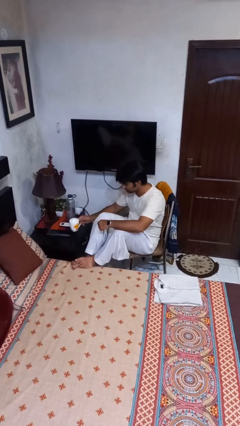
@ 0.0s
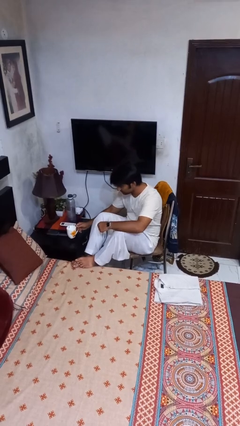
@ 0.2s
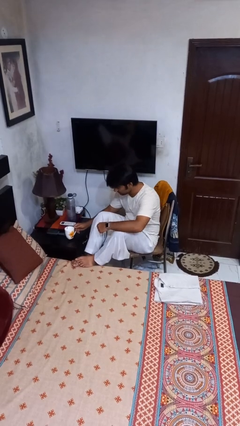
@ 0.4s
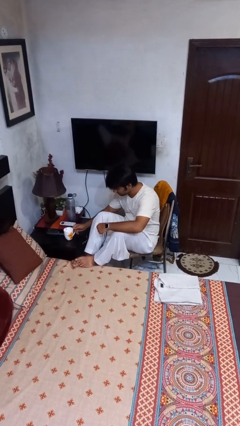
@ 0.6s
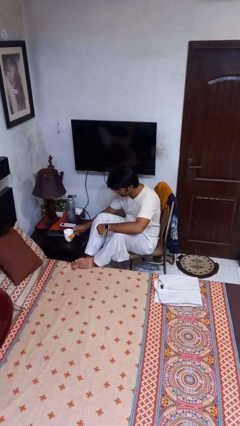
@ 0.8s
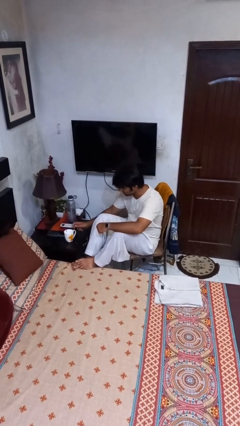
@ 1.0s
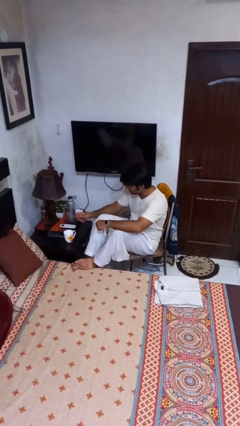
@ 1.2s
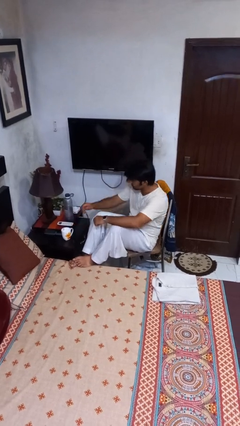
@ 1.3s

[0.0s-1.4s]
person puts down object on table

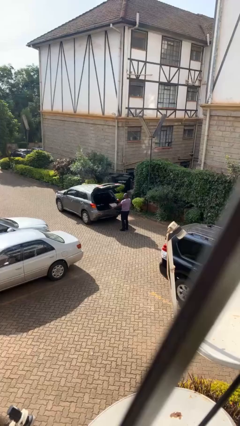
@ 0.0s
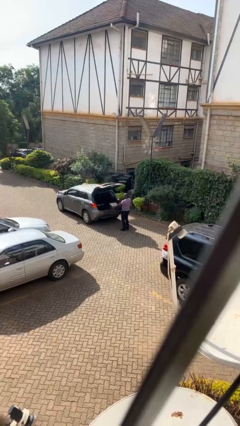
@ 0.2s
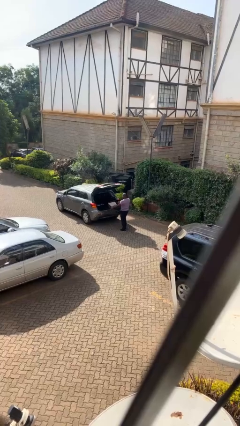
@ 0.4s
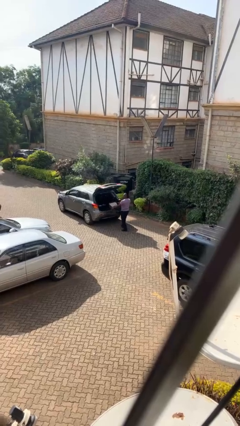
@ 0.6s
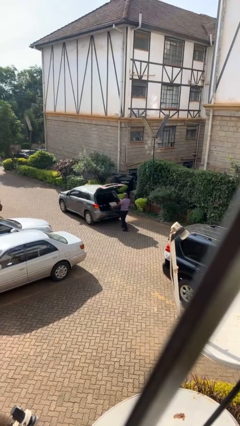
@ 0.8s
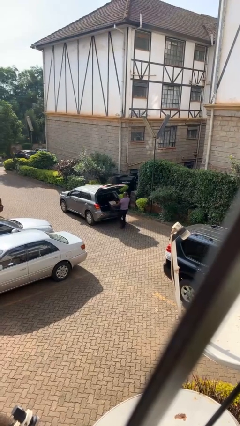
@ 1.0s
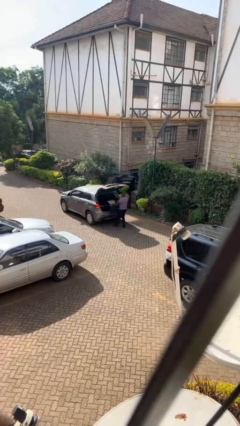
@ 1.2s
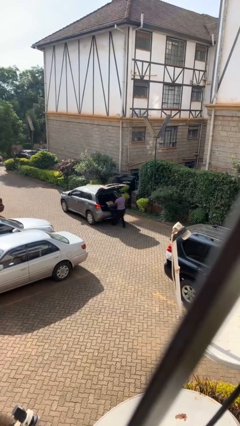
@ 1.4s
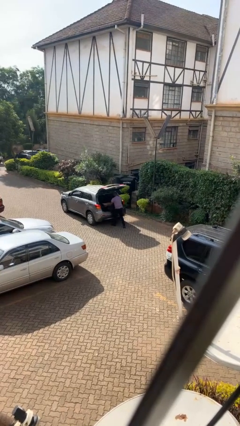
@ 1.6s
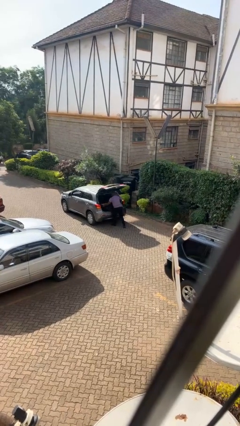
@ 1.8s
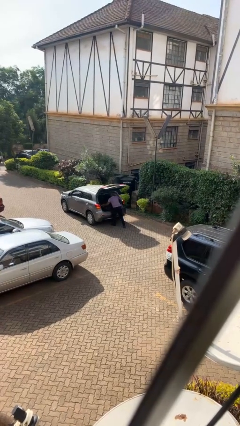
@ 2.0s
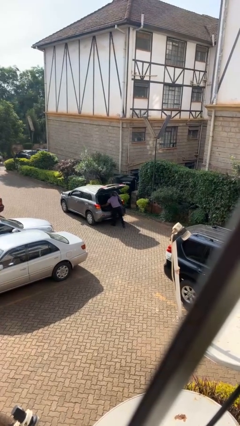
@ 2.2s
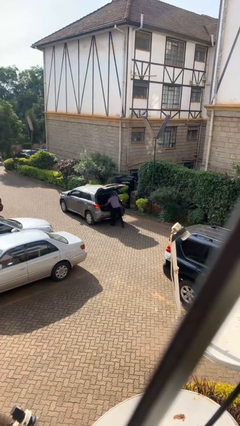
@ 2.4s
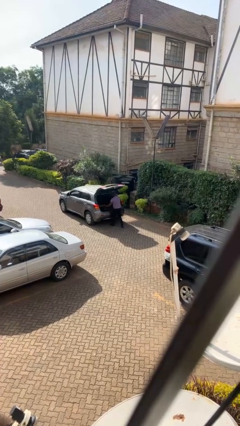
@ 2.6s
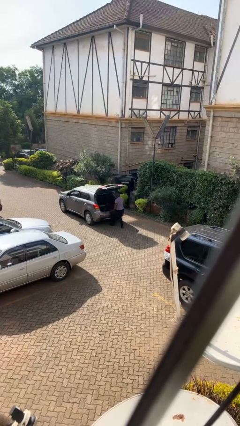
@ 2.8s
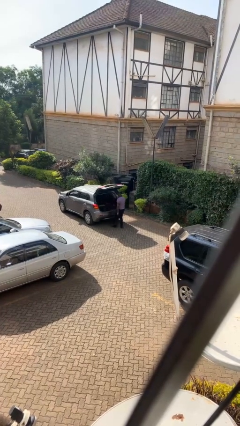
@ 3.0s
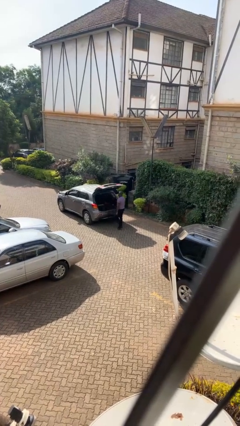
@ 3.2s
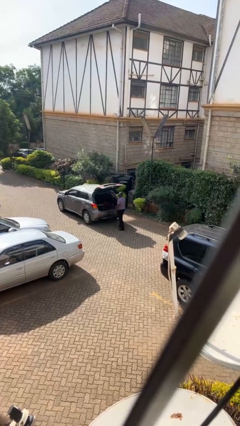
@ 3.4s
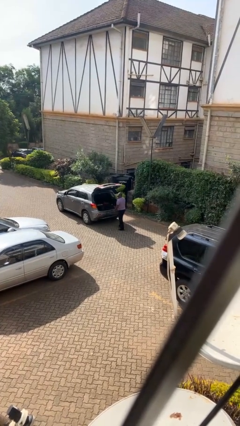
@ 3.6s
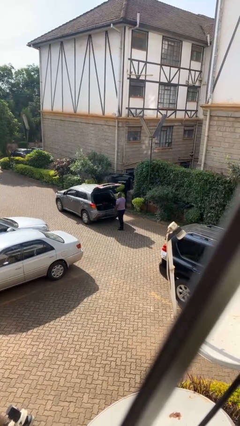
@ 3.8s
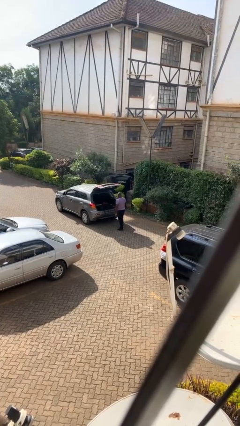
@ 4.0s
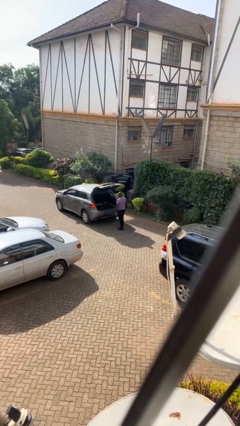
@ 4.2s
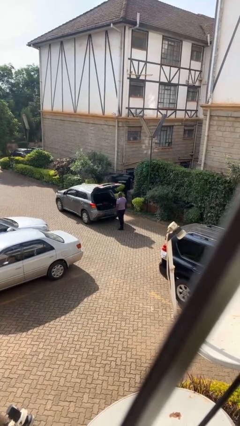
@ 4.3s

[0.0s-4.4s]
person loads car

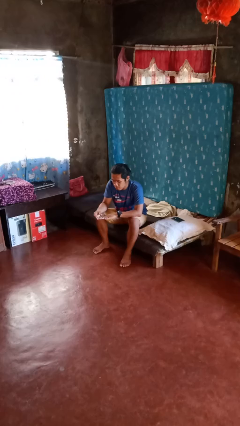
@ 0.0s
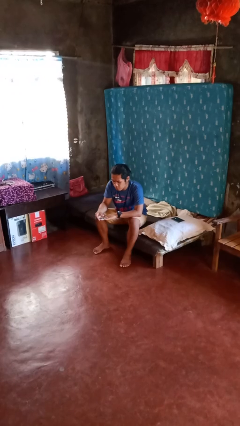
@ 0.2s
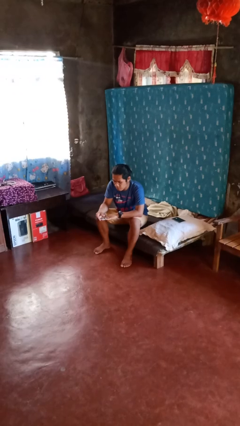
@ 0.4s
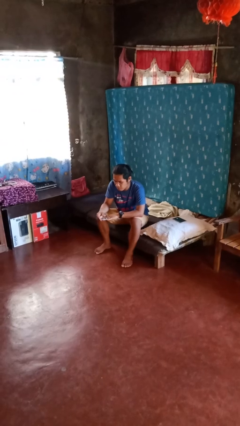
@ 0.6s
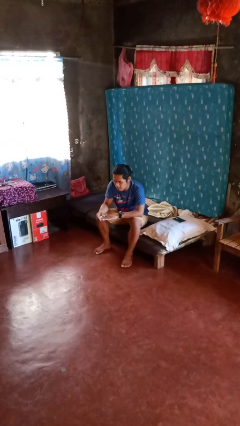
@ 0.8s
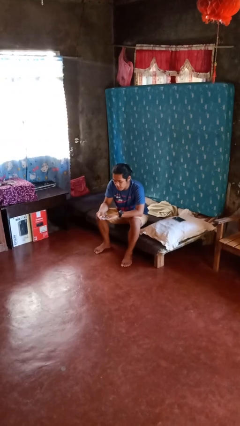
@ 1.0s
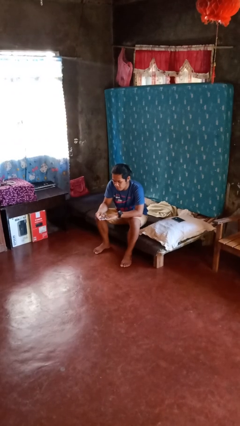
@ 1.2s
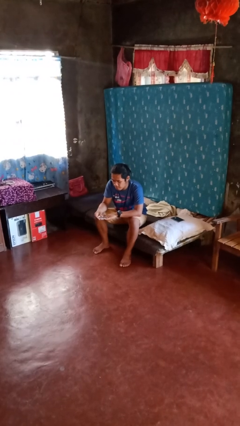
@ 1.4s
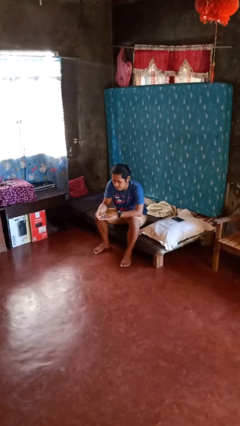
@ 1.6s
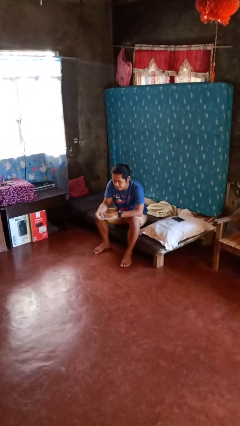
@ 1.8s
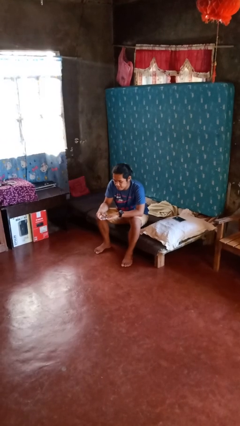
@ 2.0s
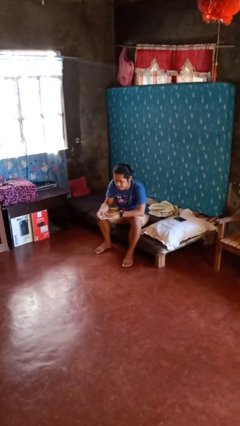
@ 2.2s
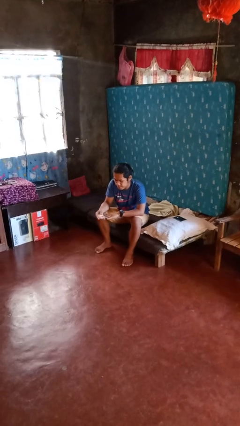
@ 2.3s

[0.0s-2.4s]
person clips fingernails

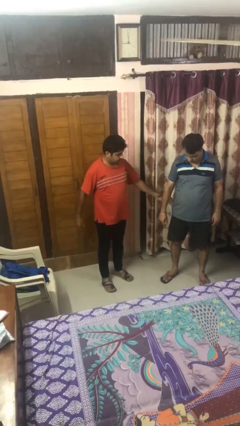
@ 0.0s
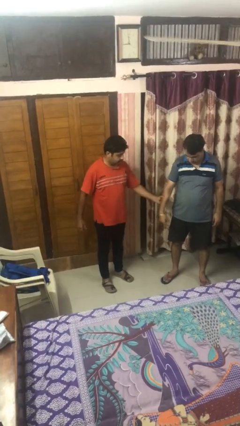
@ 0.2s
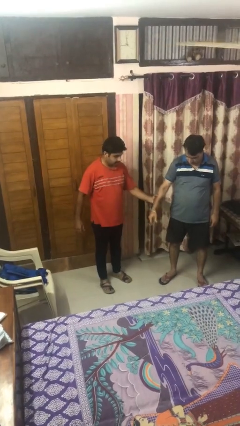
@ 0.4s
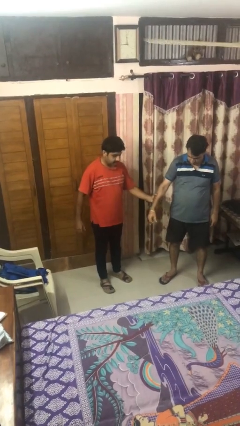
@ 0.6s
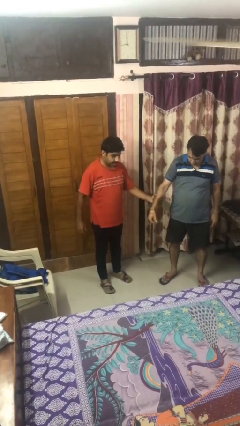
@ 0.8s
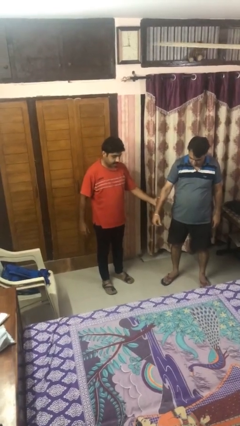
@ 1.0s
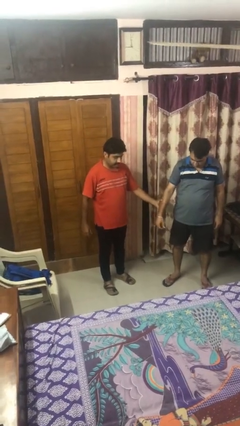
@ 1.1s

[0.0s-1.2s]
person grabs person by forearm

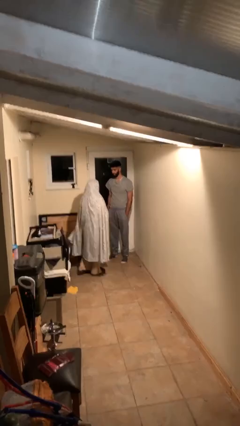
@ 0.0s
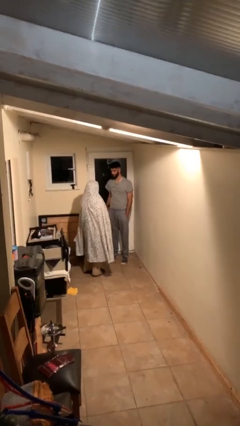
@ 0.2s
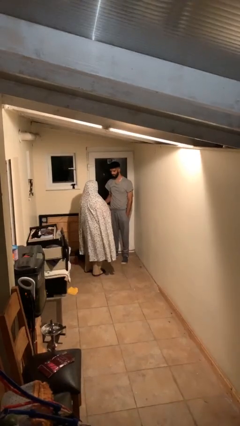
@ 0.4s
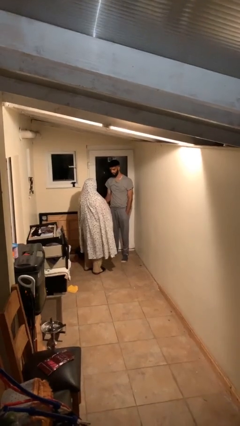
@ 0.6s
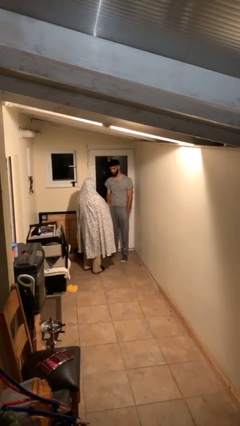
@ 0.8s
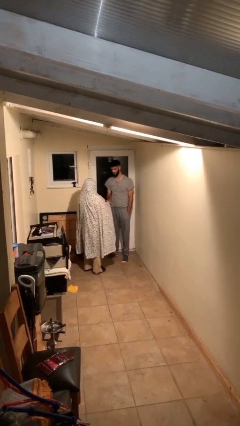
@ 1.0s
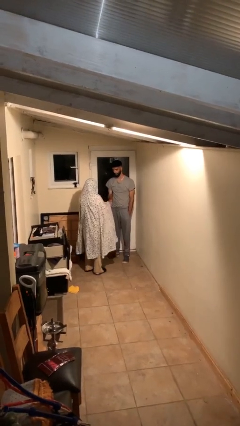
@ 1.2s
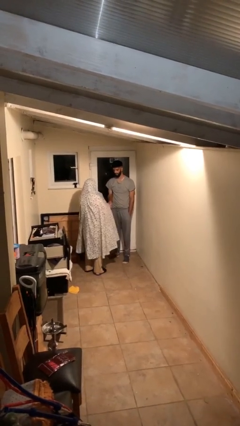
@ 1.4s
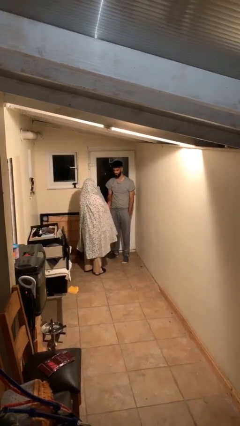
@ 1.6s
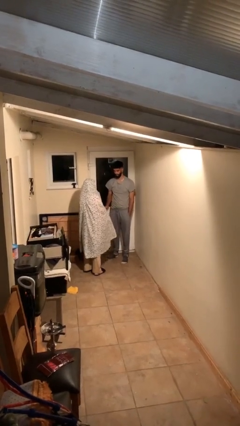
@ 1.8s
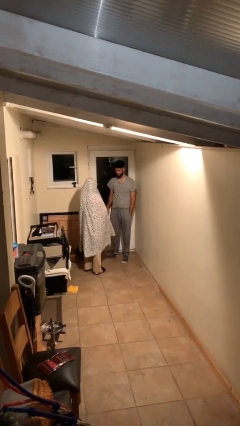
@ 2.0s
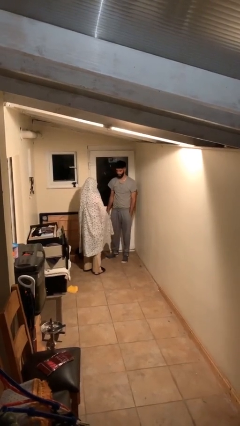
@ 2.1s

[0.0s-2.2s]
person shakes hand

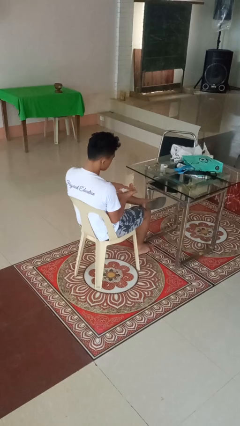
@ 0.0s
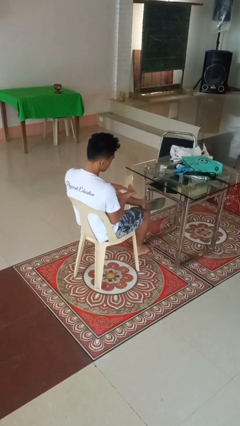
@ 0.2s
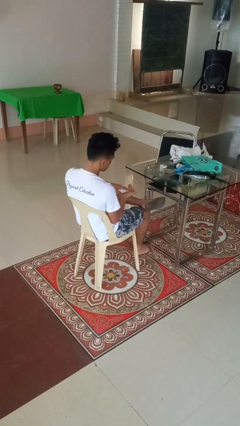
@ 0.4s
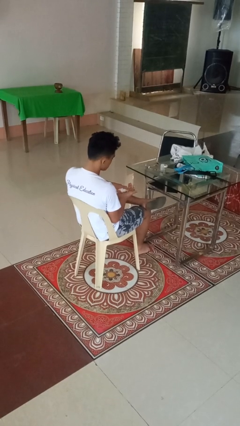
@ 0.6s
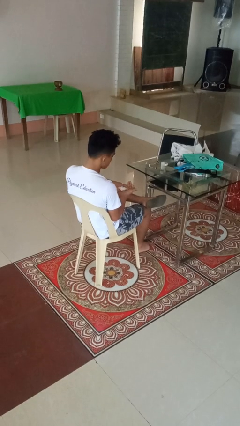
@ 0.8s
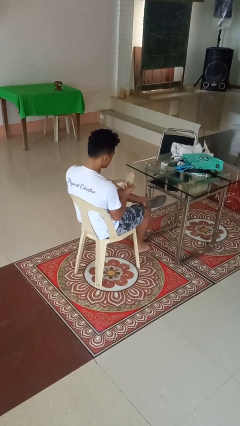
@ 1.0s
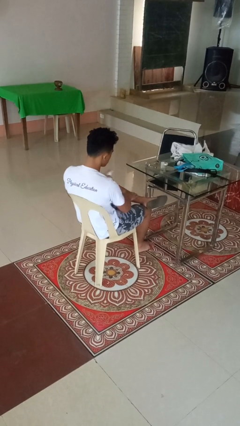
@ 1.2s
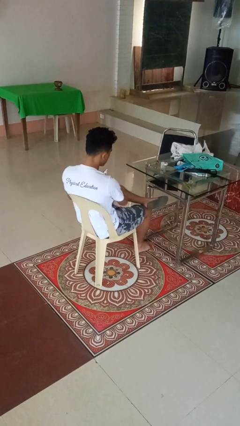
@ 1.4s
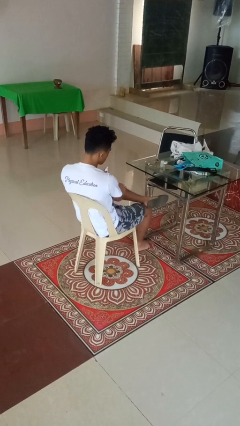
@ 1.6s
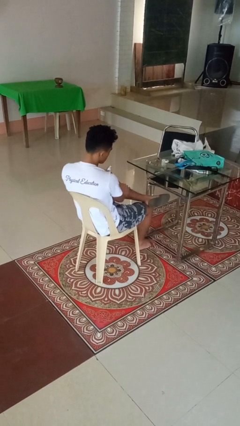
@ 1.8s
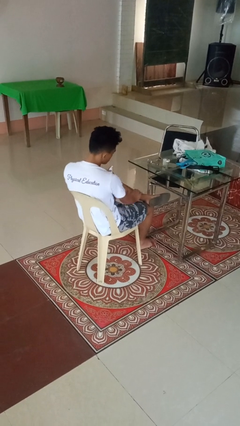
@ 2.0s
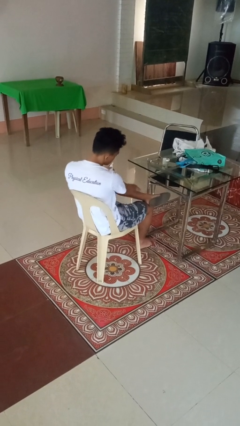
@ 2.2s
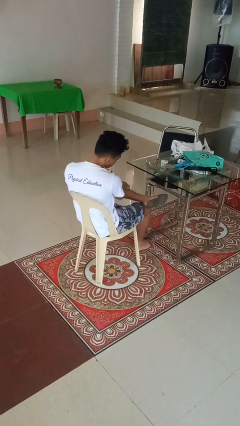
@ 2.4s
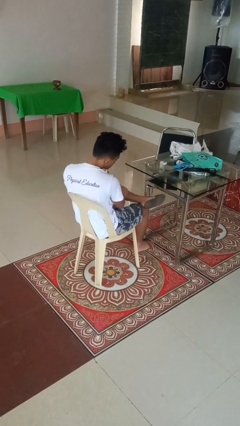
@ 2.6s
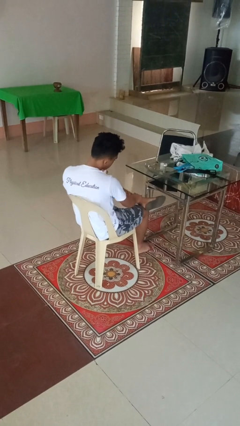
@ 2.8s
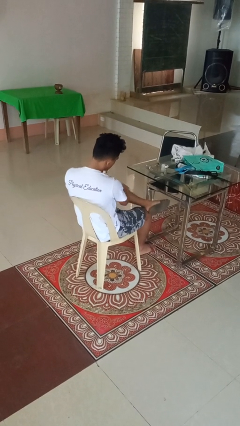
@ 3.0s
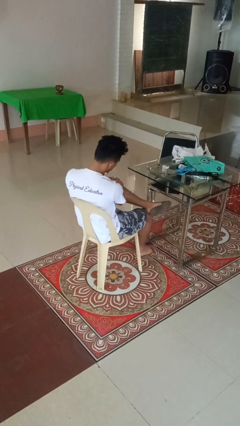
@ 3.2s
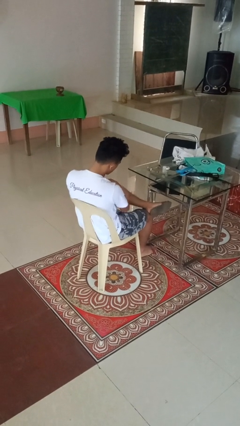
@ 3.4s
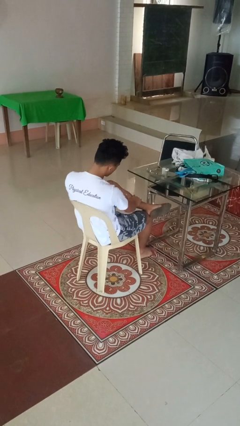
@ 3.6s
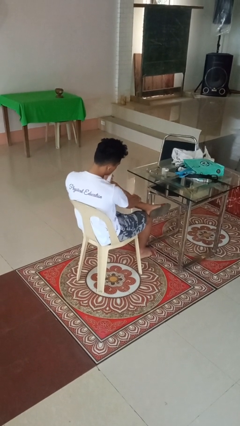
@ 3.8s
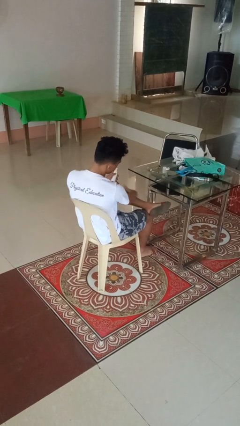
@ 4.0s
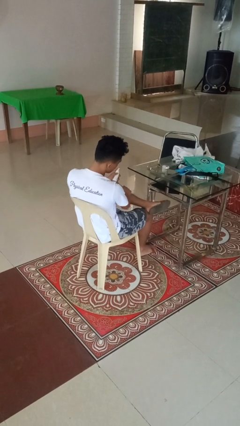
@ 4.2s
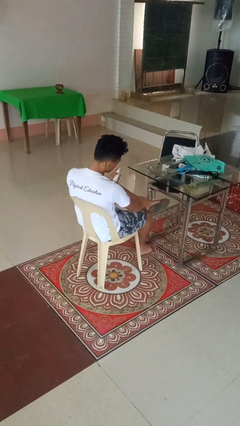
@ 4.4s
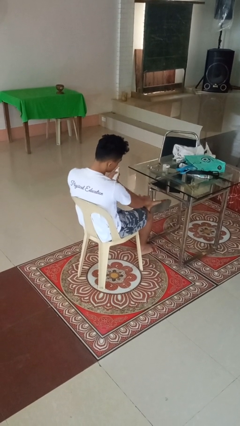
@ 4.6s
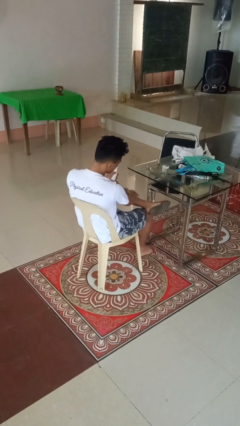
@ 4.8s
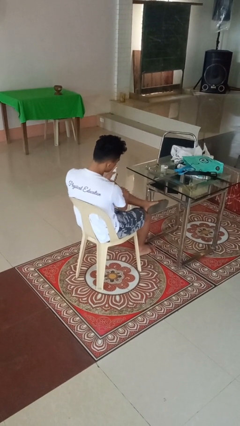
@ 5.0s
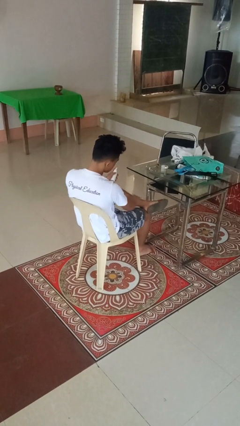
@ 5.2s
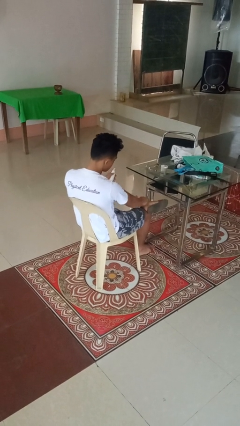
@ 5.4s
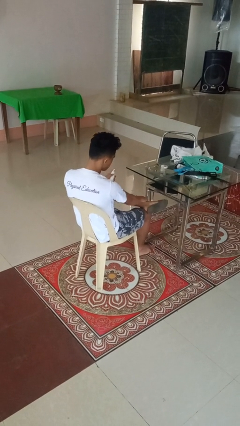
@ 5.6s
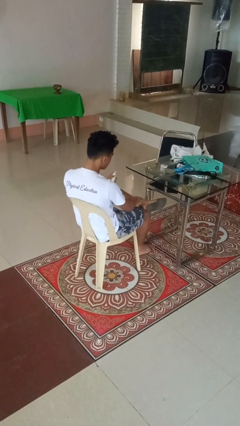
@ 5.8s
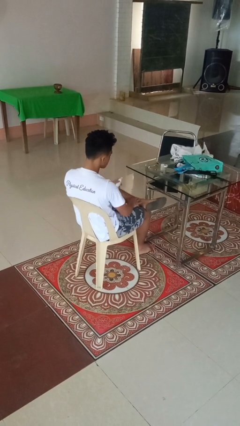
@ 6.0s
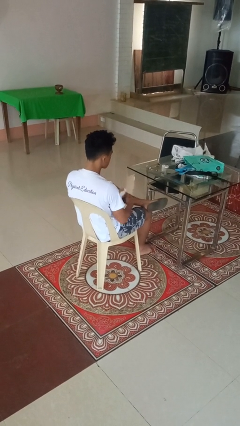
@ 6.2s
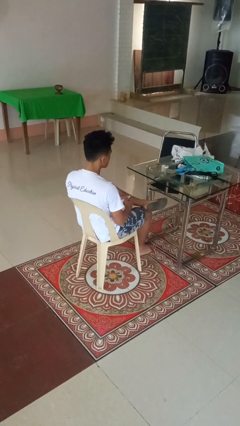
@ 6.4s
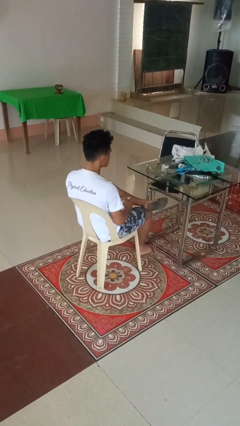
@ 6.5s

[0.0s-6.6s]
person applies sunscreen
